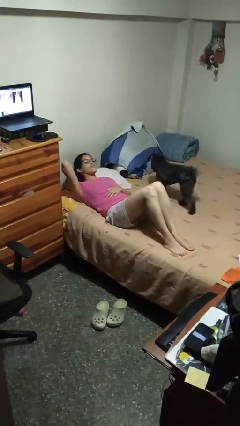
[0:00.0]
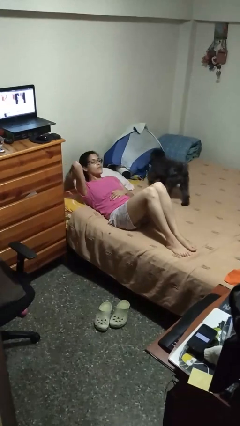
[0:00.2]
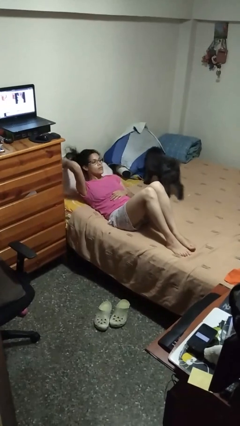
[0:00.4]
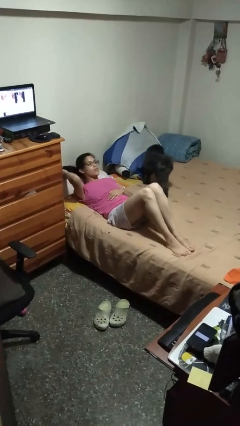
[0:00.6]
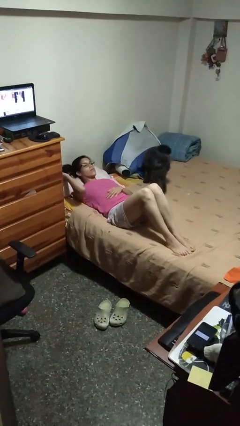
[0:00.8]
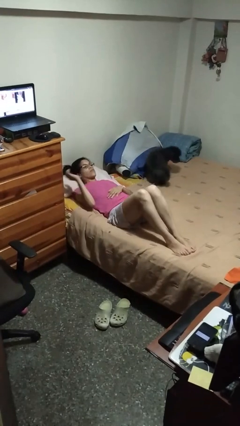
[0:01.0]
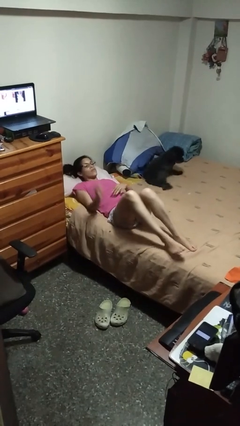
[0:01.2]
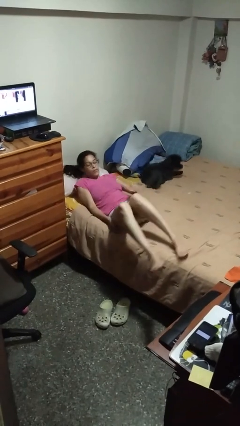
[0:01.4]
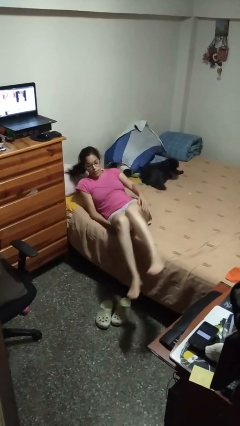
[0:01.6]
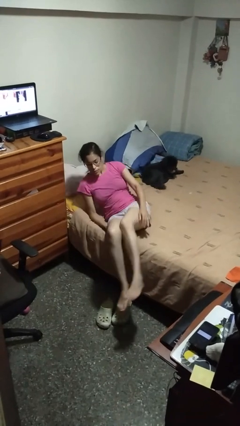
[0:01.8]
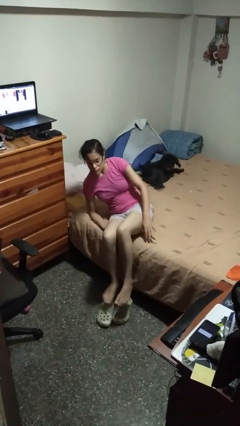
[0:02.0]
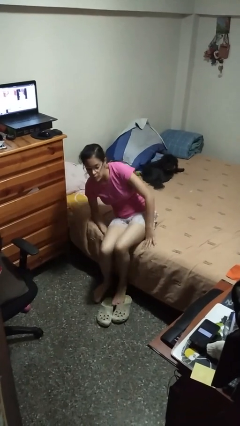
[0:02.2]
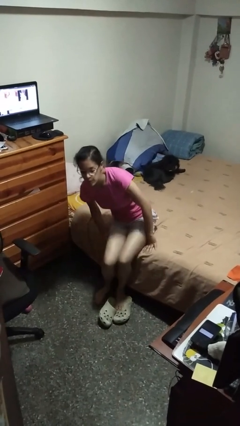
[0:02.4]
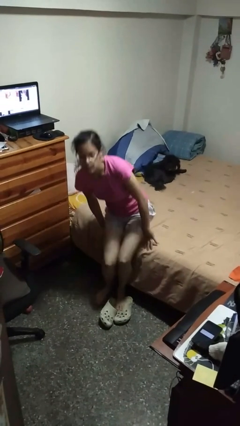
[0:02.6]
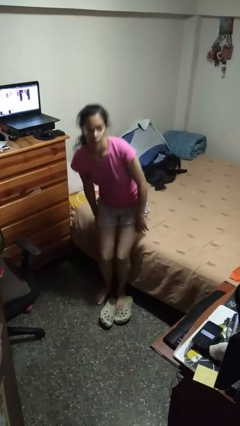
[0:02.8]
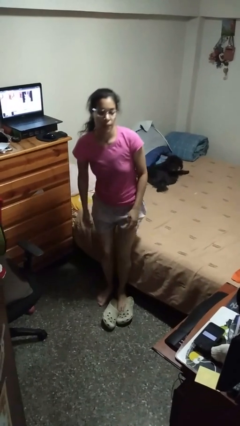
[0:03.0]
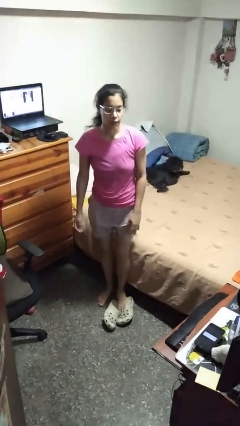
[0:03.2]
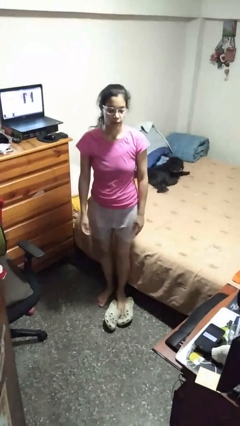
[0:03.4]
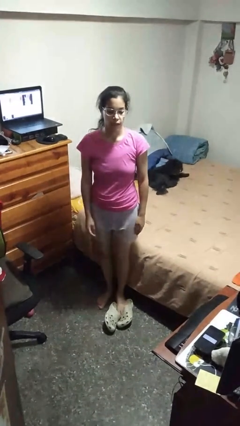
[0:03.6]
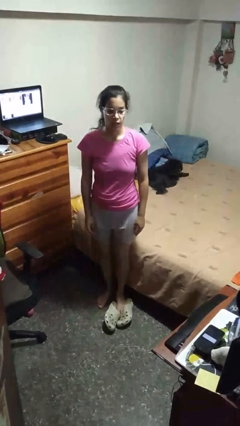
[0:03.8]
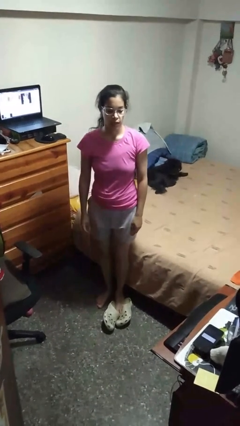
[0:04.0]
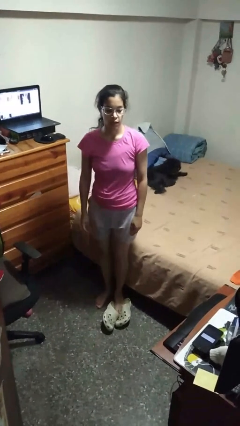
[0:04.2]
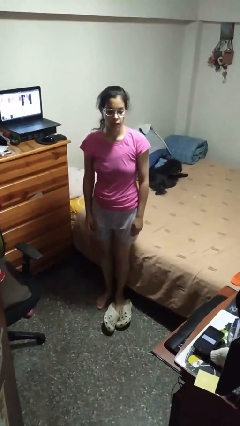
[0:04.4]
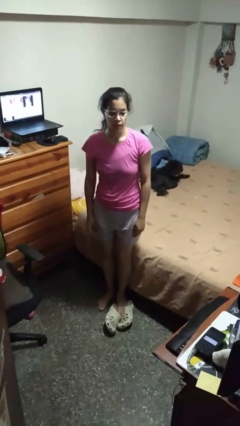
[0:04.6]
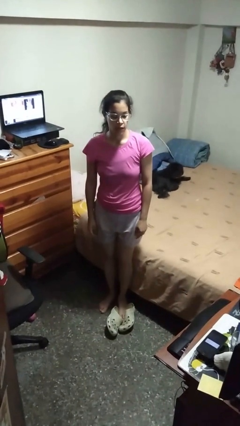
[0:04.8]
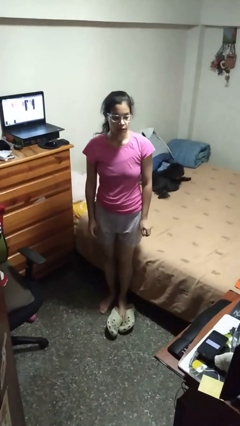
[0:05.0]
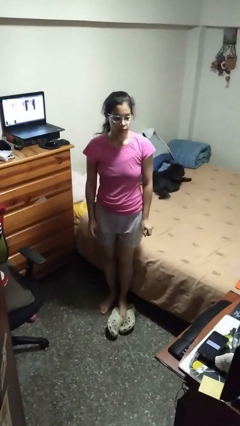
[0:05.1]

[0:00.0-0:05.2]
person stands up

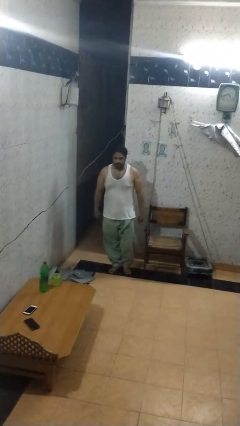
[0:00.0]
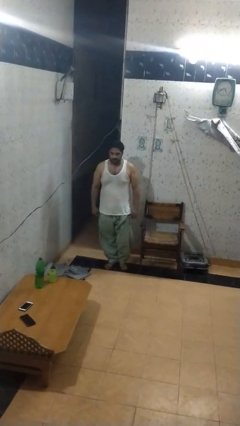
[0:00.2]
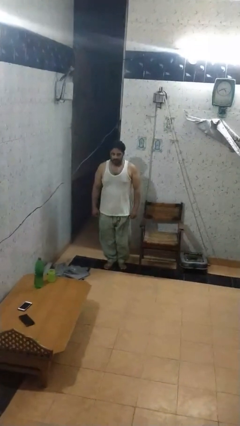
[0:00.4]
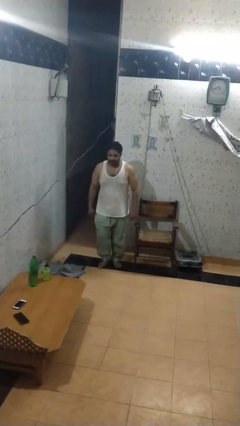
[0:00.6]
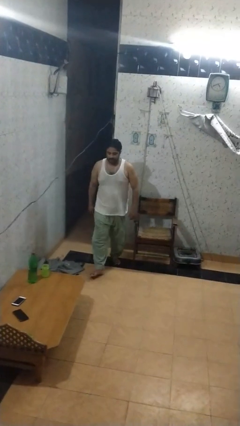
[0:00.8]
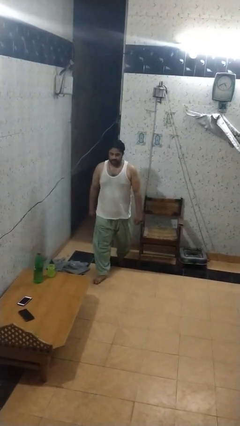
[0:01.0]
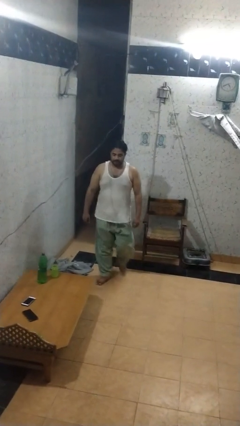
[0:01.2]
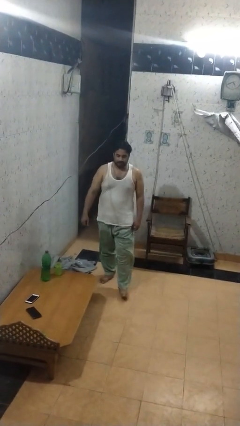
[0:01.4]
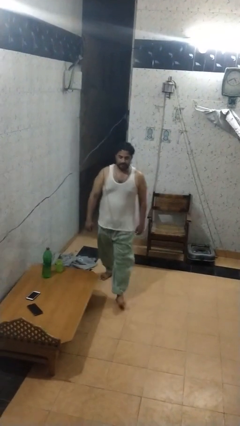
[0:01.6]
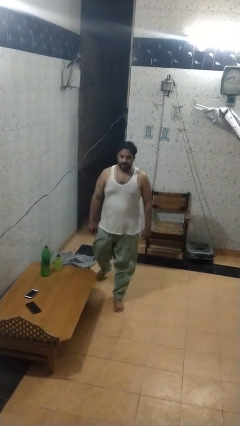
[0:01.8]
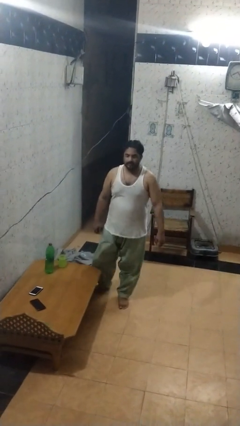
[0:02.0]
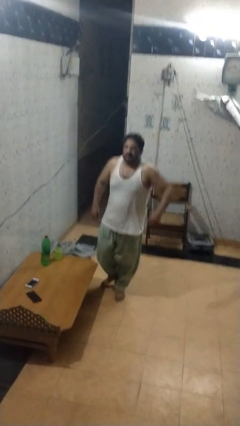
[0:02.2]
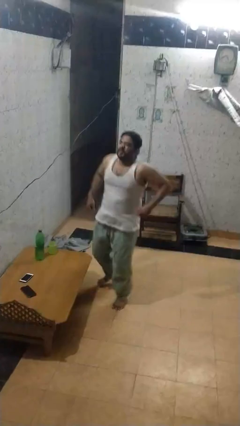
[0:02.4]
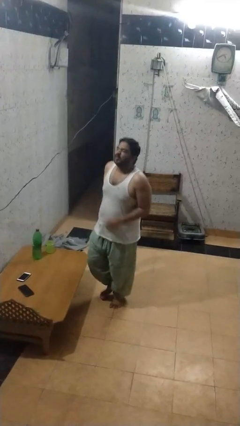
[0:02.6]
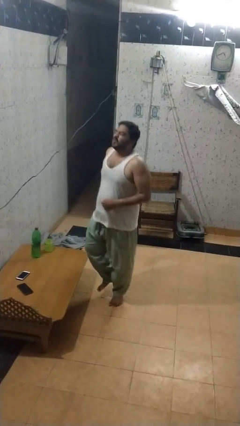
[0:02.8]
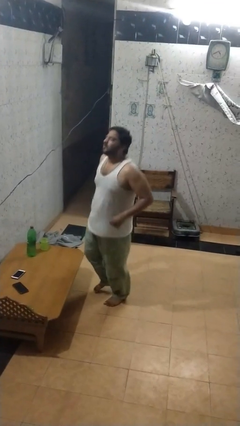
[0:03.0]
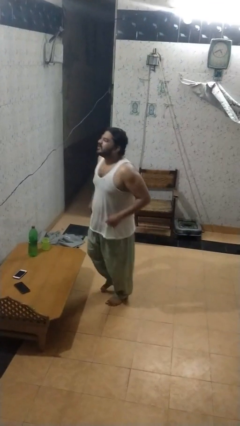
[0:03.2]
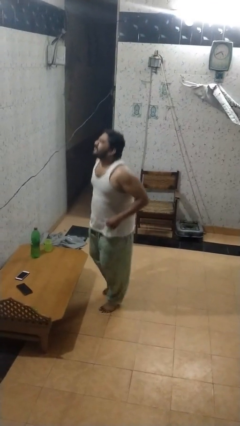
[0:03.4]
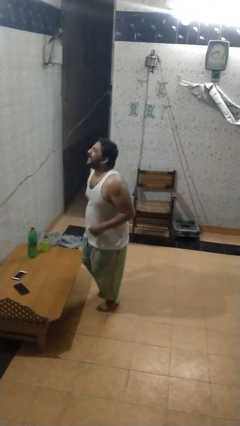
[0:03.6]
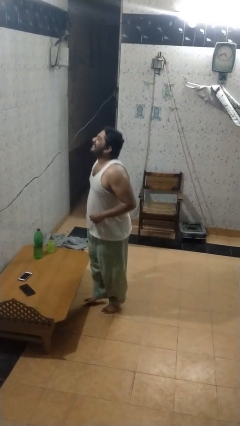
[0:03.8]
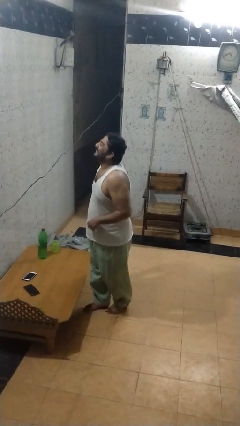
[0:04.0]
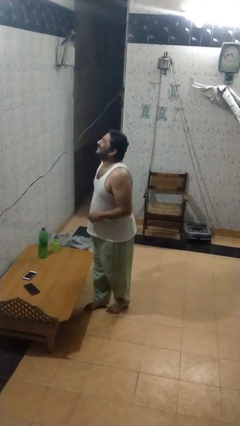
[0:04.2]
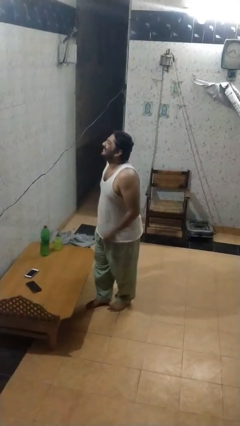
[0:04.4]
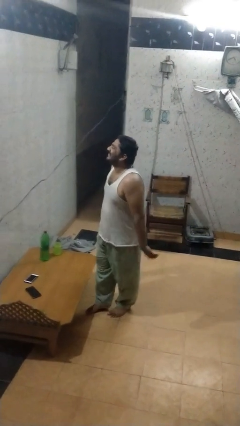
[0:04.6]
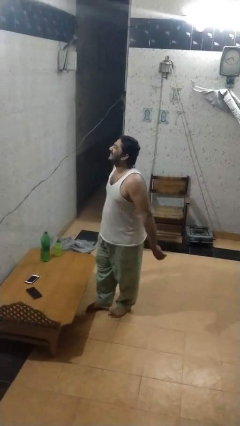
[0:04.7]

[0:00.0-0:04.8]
person bumps into table

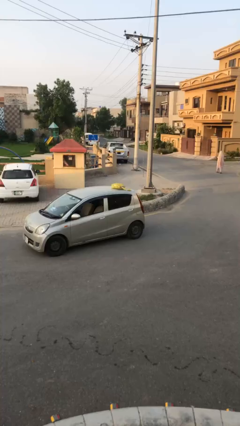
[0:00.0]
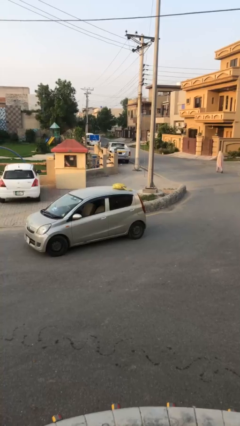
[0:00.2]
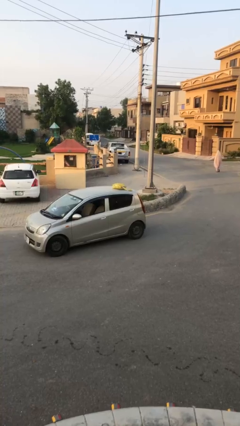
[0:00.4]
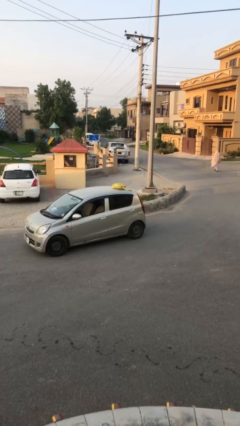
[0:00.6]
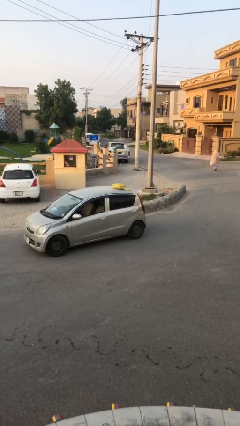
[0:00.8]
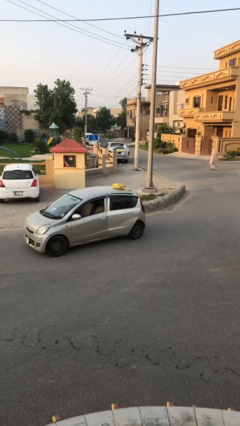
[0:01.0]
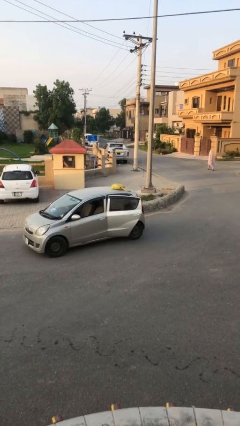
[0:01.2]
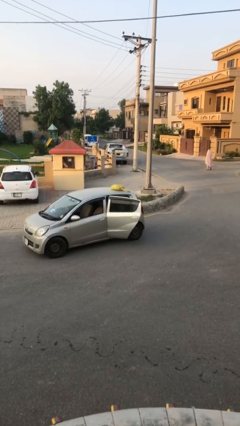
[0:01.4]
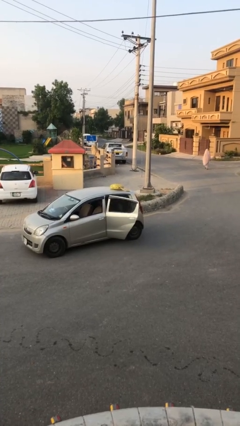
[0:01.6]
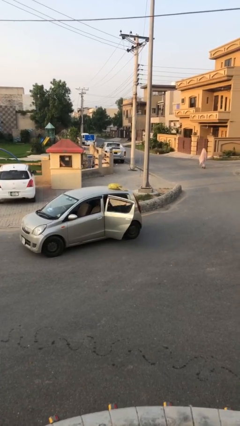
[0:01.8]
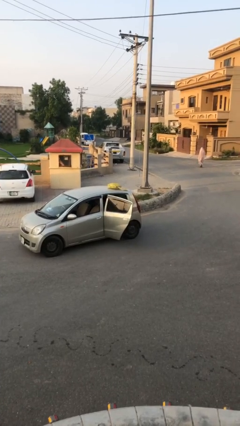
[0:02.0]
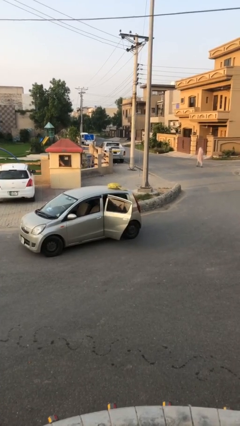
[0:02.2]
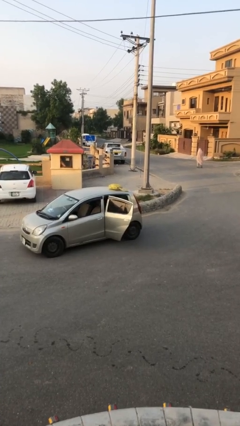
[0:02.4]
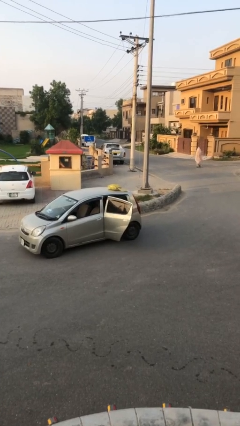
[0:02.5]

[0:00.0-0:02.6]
person opens car door

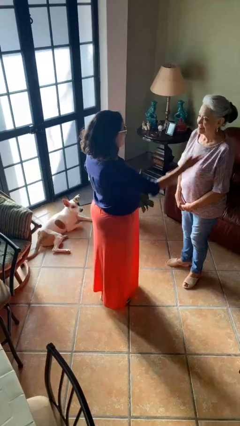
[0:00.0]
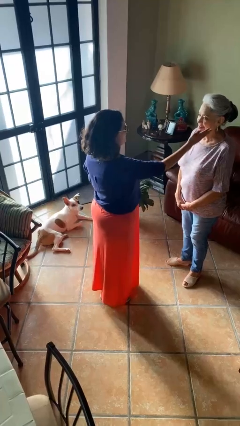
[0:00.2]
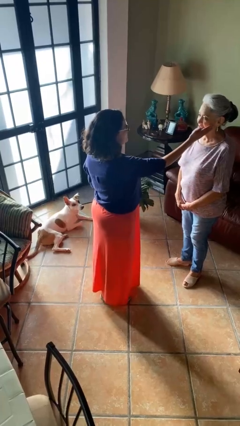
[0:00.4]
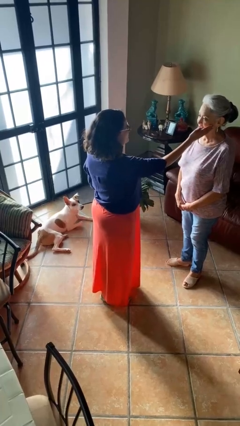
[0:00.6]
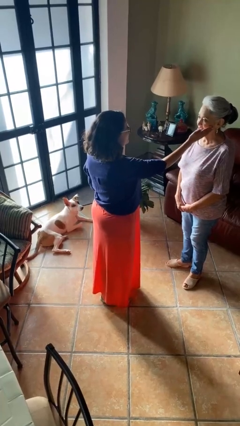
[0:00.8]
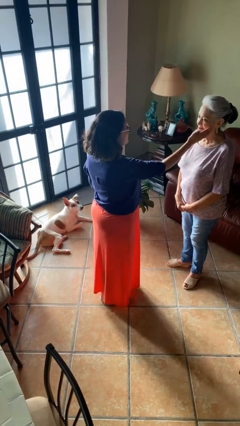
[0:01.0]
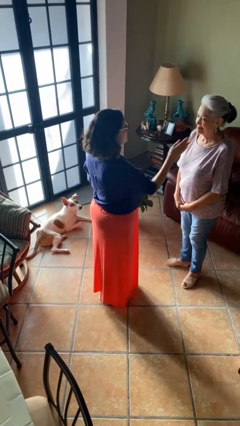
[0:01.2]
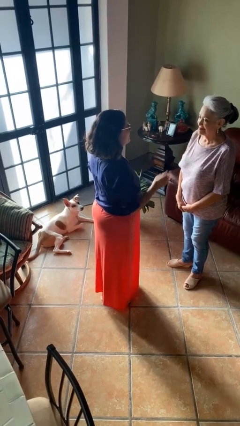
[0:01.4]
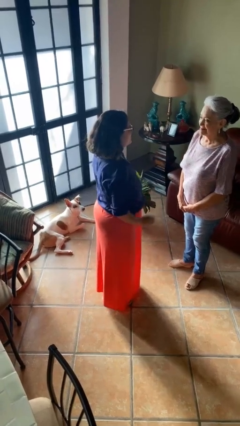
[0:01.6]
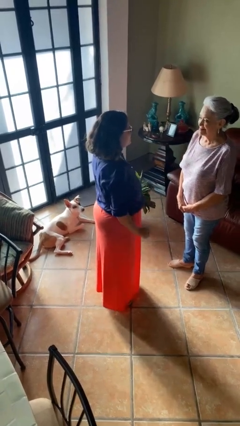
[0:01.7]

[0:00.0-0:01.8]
person touches face of person

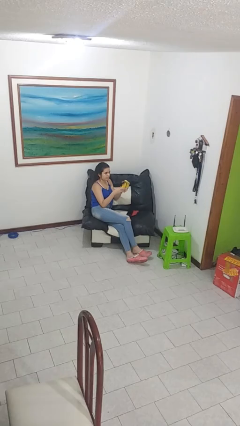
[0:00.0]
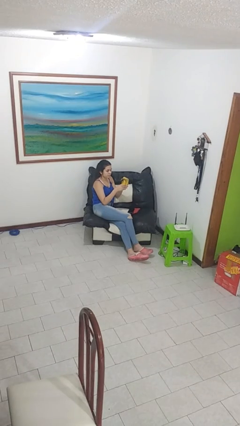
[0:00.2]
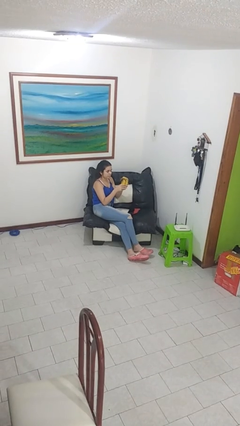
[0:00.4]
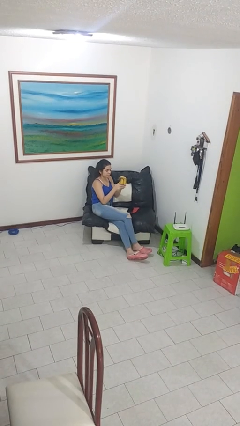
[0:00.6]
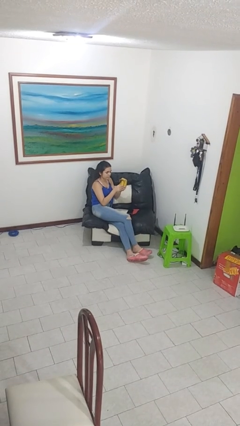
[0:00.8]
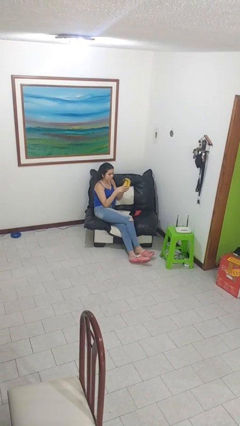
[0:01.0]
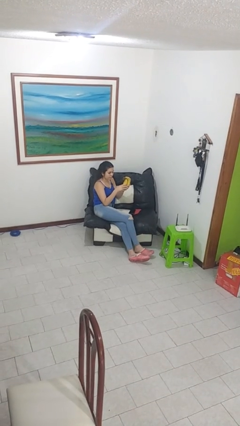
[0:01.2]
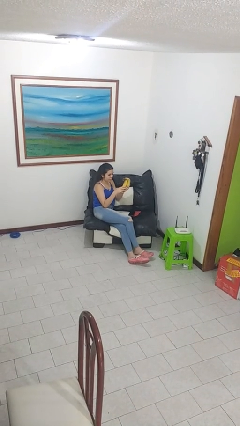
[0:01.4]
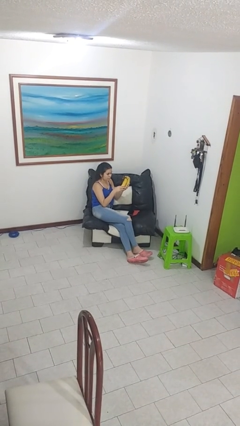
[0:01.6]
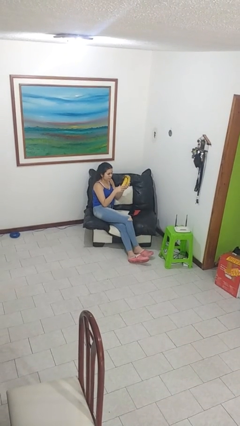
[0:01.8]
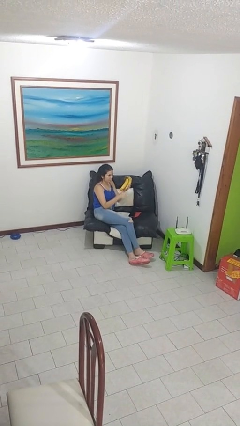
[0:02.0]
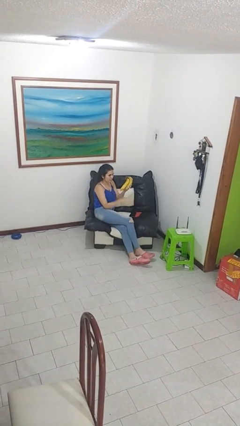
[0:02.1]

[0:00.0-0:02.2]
person taps object with finger

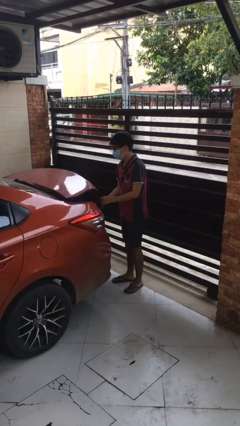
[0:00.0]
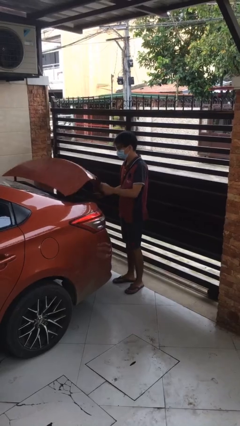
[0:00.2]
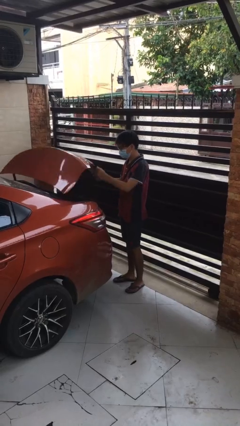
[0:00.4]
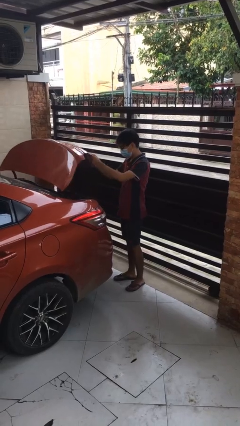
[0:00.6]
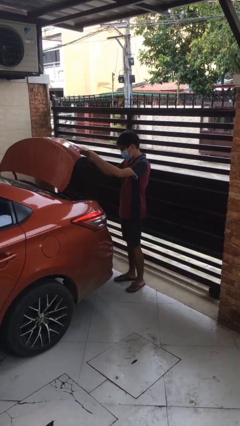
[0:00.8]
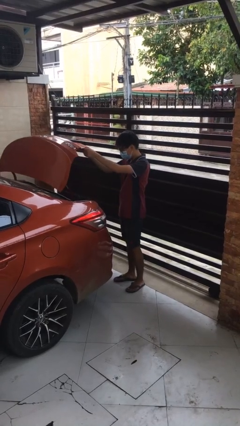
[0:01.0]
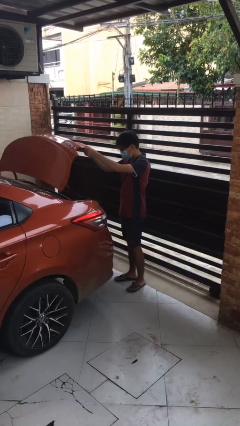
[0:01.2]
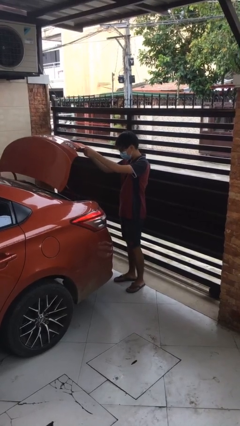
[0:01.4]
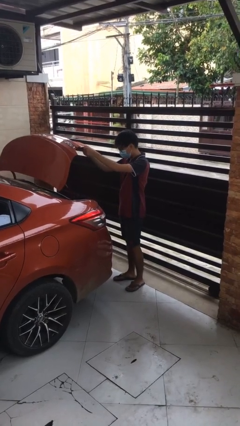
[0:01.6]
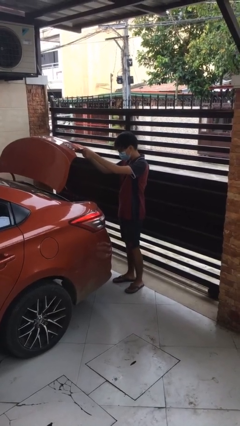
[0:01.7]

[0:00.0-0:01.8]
person opens car trunk
